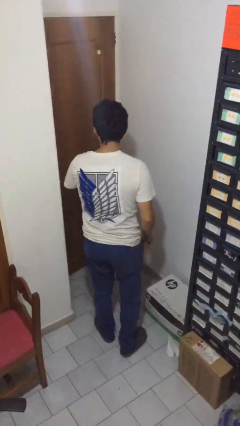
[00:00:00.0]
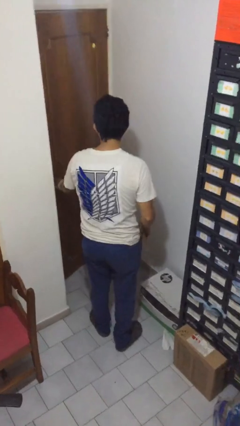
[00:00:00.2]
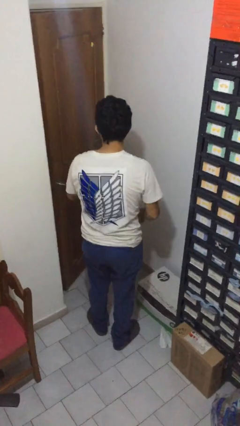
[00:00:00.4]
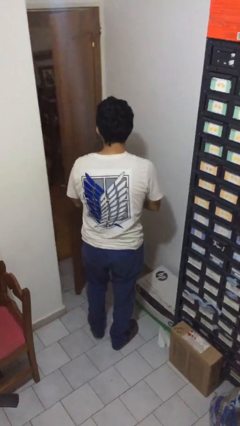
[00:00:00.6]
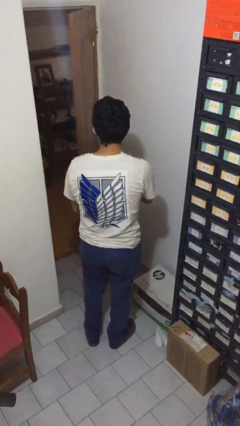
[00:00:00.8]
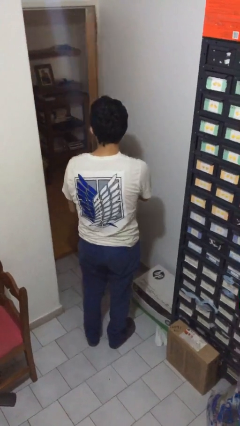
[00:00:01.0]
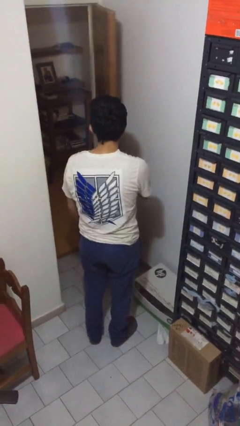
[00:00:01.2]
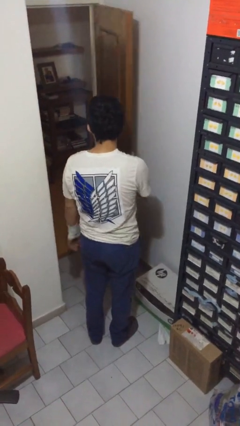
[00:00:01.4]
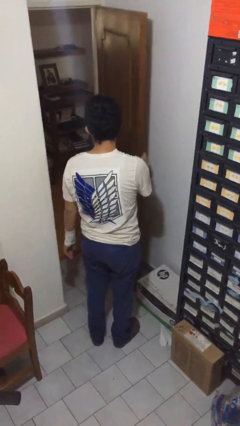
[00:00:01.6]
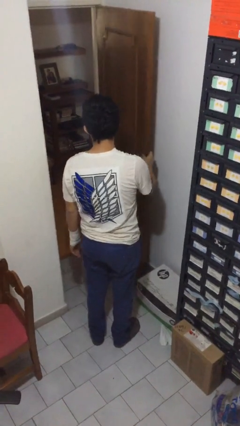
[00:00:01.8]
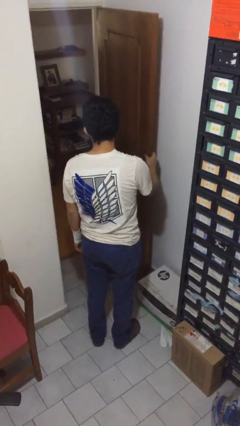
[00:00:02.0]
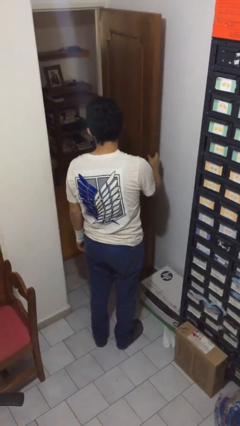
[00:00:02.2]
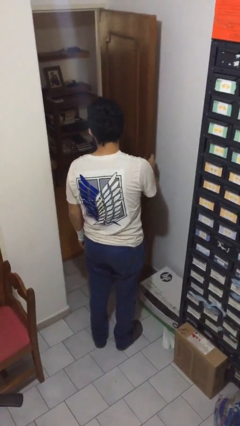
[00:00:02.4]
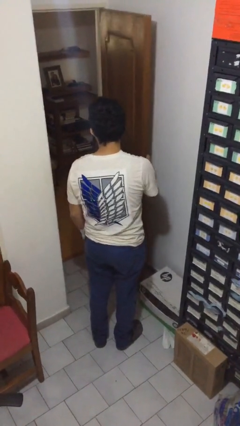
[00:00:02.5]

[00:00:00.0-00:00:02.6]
person opens facility door

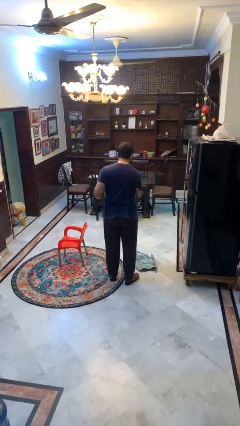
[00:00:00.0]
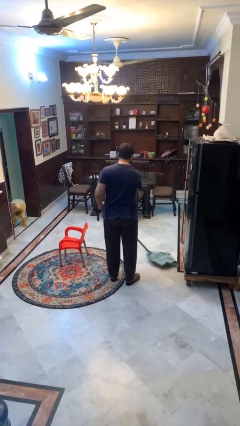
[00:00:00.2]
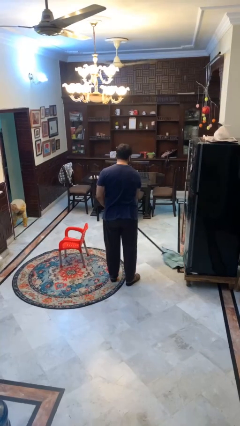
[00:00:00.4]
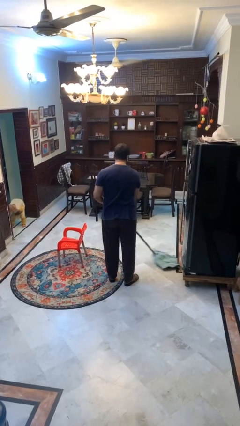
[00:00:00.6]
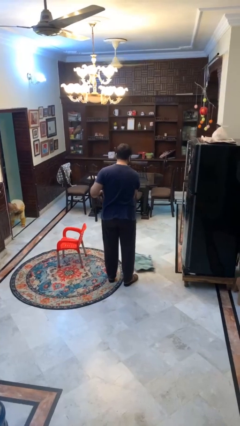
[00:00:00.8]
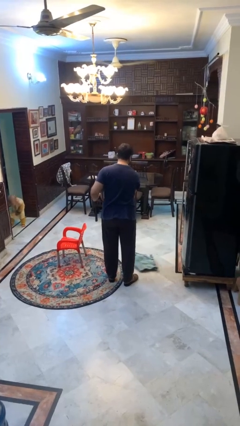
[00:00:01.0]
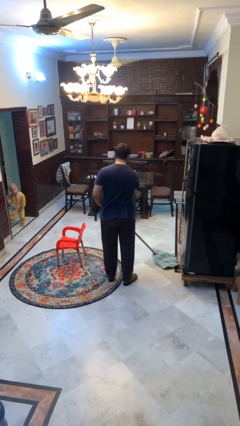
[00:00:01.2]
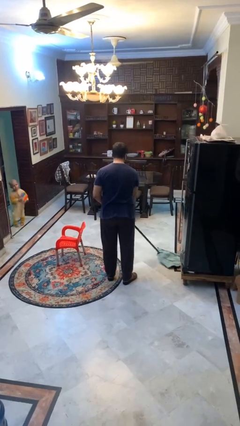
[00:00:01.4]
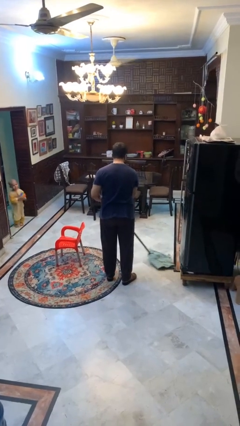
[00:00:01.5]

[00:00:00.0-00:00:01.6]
person mops

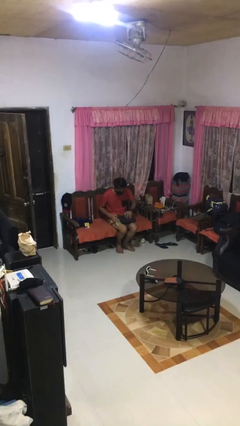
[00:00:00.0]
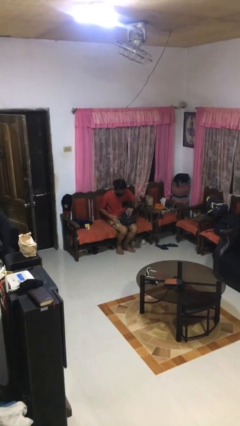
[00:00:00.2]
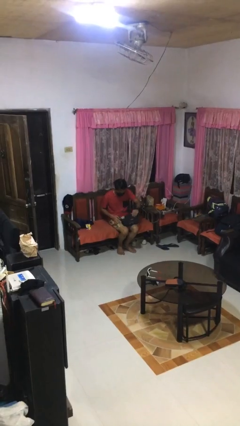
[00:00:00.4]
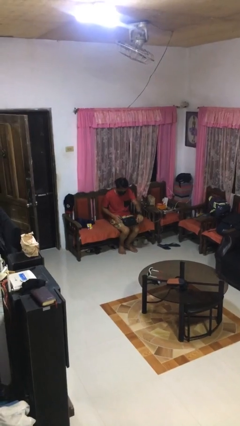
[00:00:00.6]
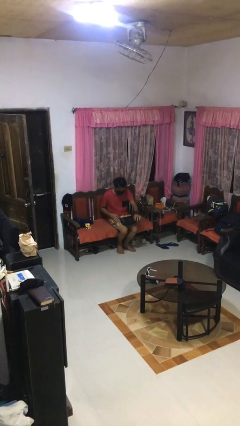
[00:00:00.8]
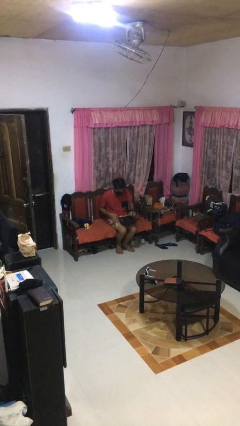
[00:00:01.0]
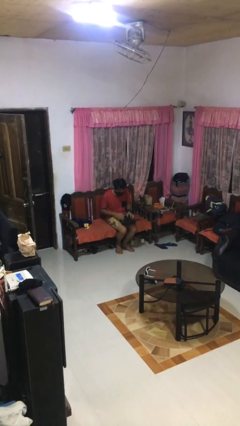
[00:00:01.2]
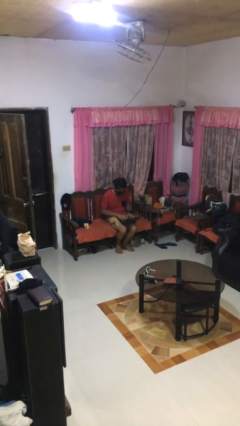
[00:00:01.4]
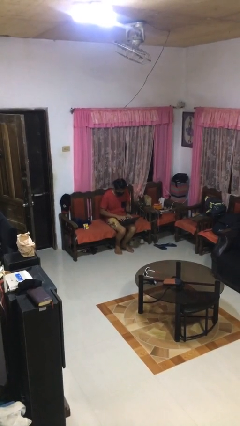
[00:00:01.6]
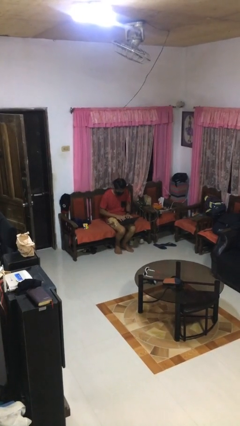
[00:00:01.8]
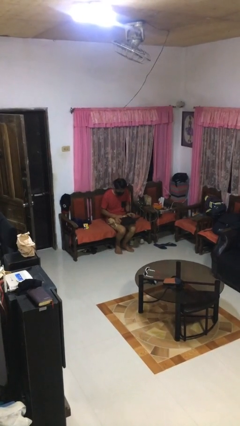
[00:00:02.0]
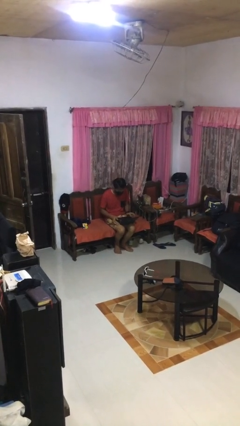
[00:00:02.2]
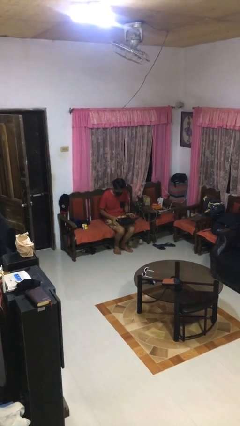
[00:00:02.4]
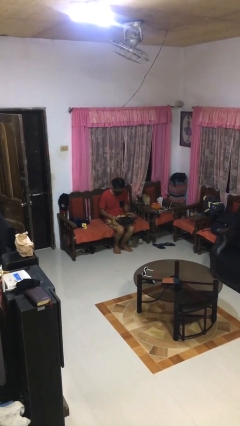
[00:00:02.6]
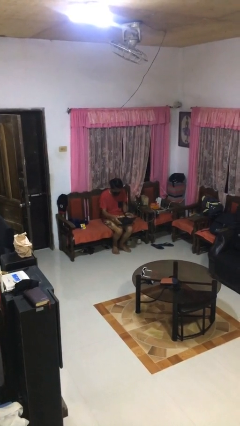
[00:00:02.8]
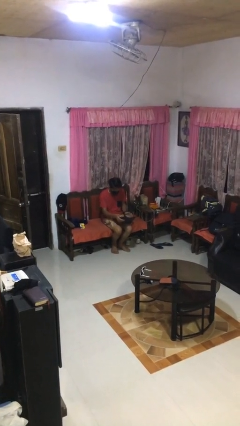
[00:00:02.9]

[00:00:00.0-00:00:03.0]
person opens laptop

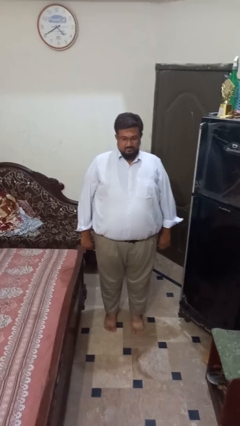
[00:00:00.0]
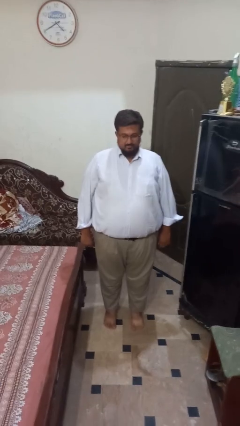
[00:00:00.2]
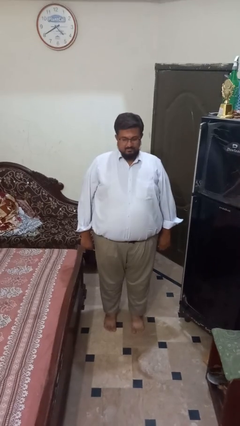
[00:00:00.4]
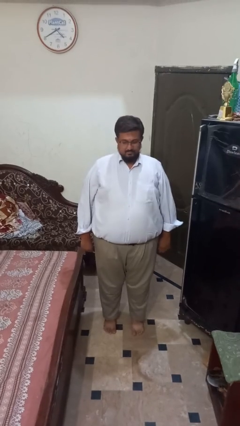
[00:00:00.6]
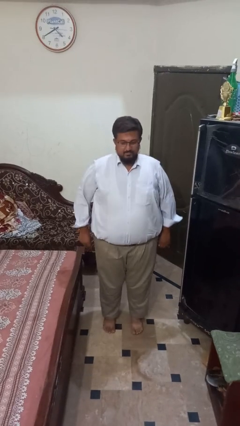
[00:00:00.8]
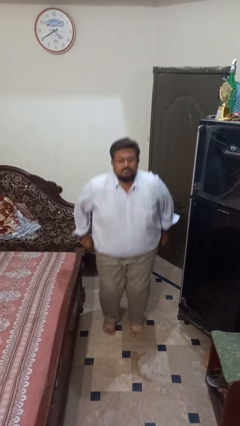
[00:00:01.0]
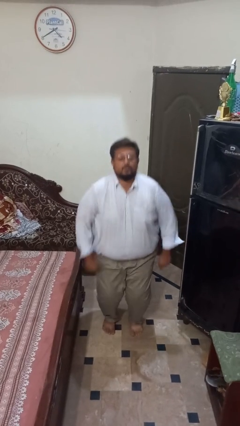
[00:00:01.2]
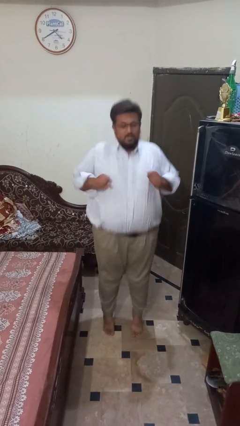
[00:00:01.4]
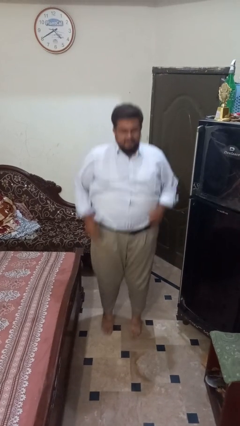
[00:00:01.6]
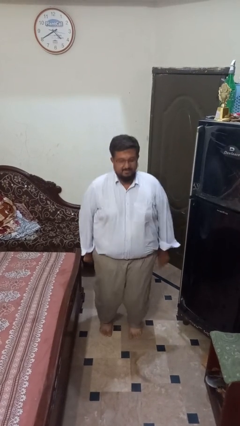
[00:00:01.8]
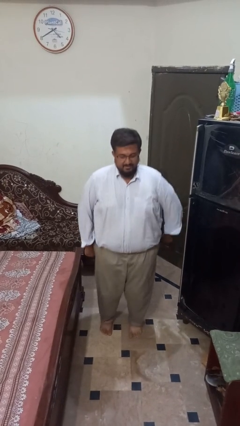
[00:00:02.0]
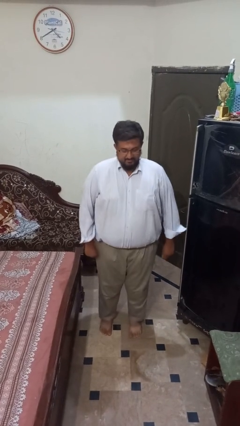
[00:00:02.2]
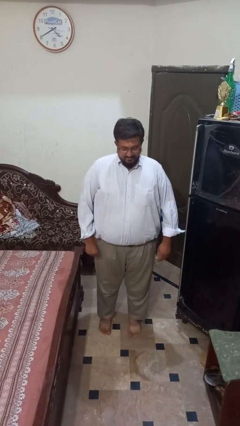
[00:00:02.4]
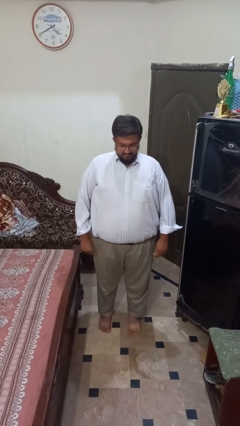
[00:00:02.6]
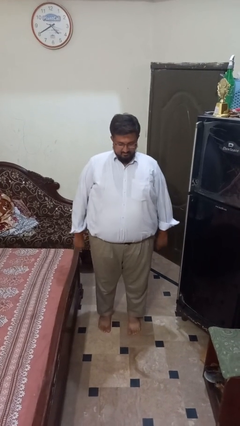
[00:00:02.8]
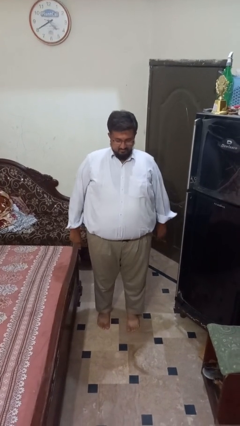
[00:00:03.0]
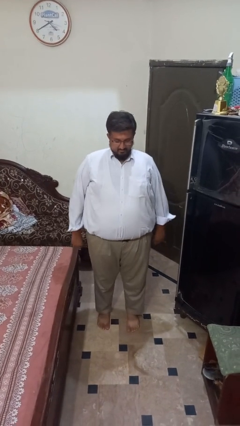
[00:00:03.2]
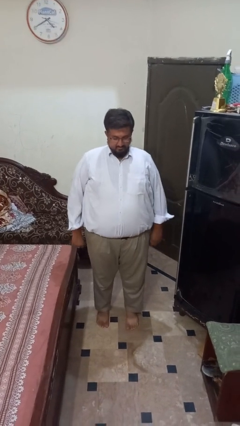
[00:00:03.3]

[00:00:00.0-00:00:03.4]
person jumps

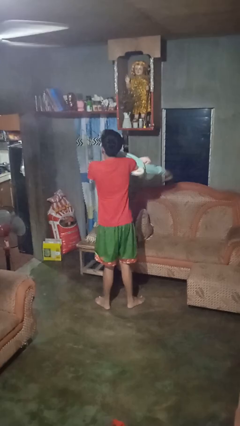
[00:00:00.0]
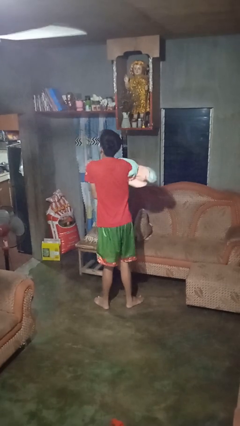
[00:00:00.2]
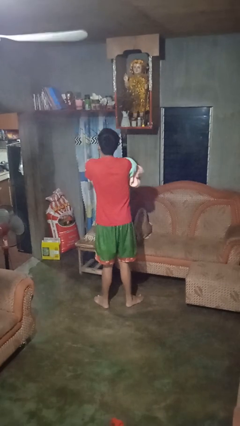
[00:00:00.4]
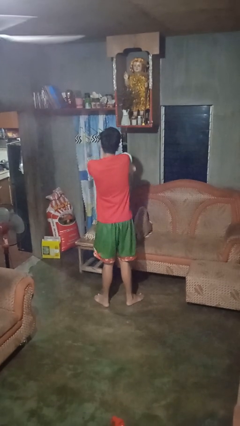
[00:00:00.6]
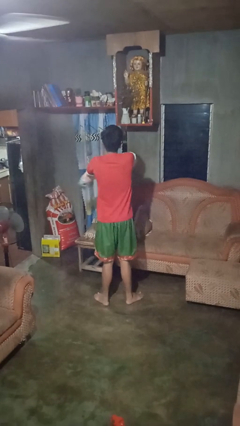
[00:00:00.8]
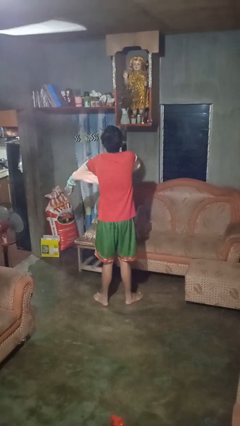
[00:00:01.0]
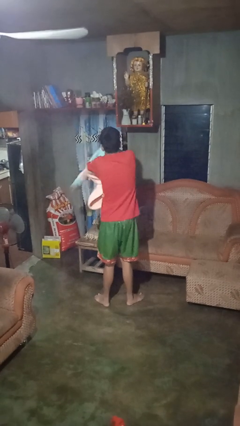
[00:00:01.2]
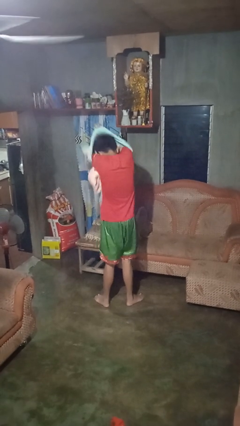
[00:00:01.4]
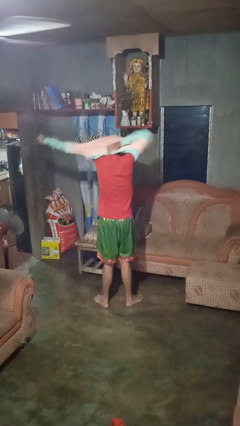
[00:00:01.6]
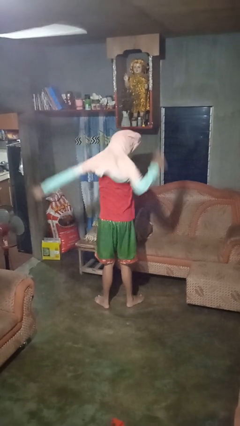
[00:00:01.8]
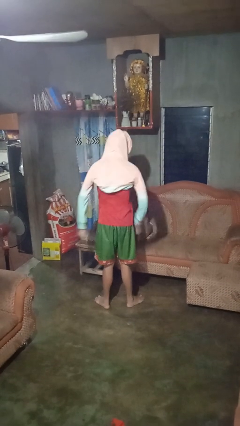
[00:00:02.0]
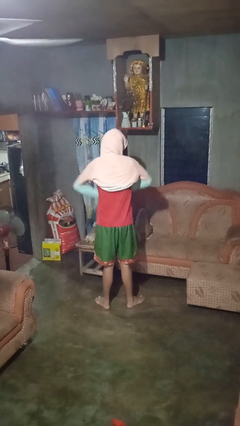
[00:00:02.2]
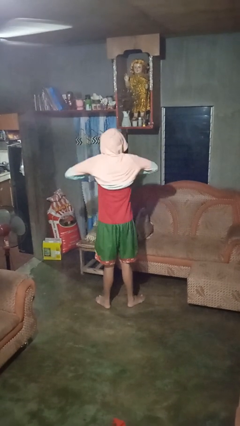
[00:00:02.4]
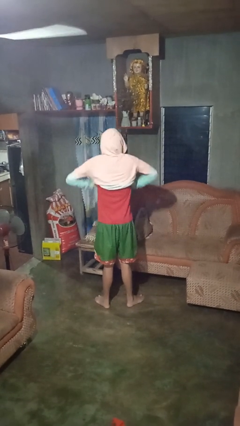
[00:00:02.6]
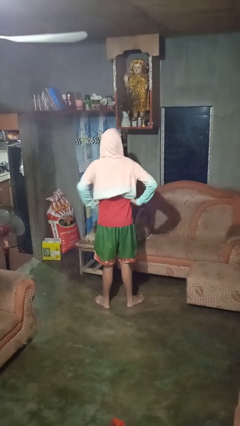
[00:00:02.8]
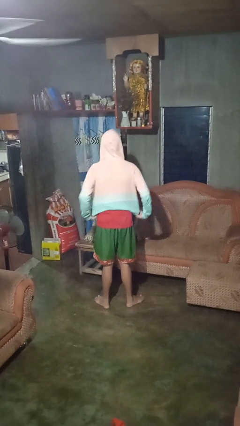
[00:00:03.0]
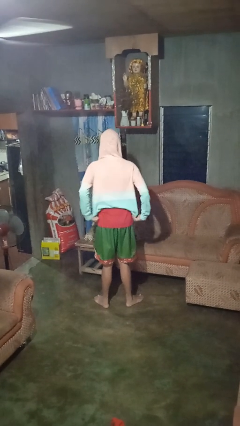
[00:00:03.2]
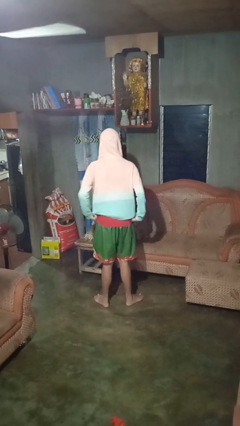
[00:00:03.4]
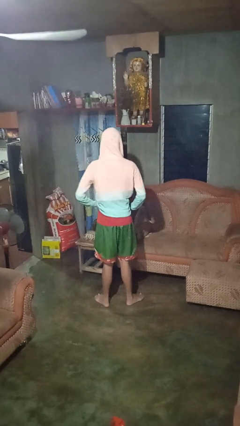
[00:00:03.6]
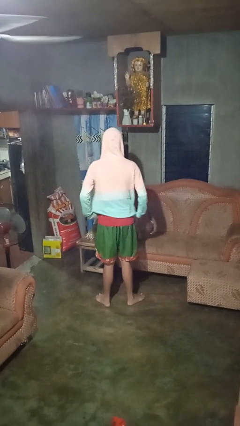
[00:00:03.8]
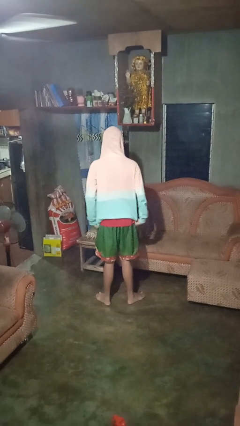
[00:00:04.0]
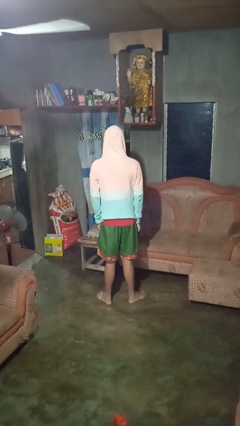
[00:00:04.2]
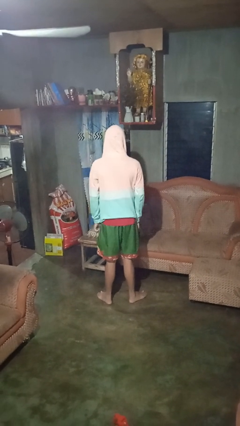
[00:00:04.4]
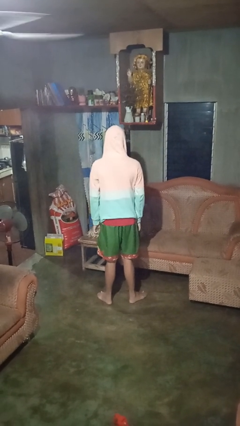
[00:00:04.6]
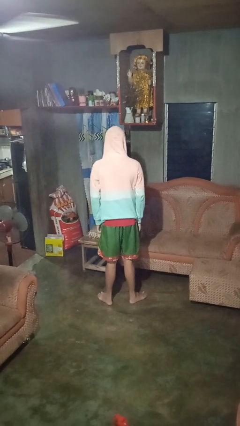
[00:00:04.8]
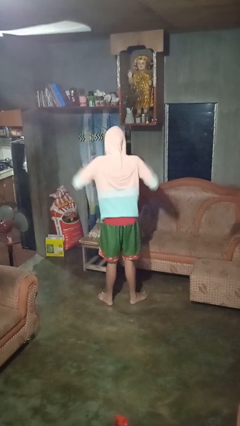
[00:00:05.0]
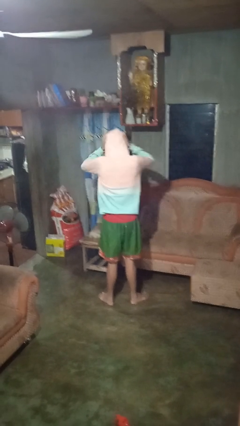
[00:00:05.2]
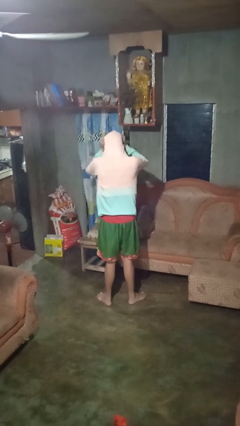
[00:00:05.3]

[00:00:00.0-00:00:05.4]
person puts on hoodie

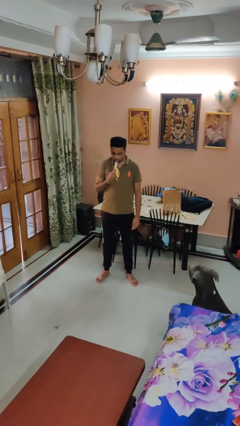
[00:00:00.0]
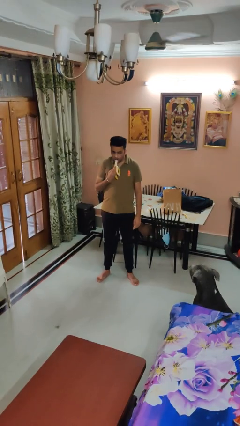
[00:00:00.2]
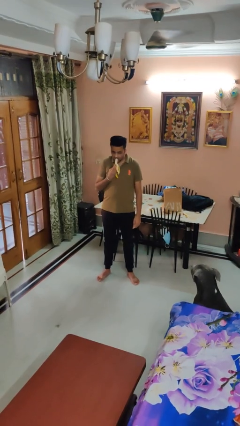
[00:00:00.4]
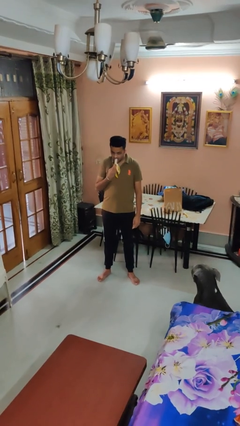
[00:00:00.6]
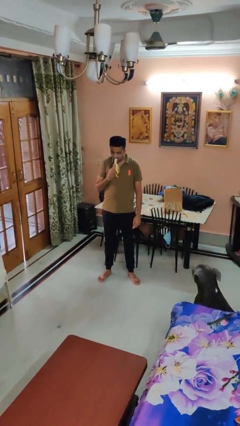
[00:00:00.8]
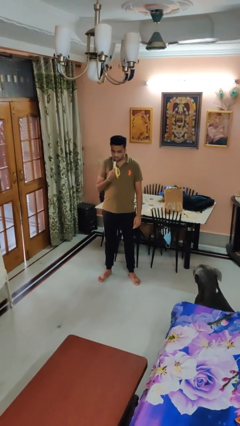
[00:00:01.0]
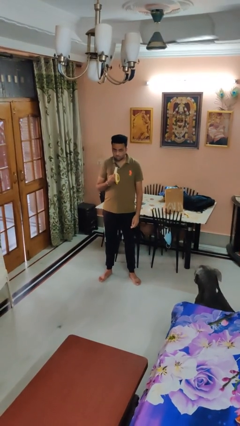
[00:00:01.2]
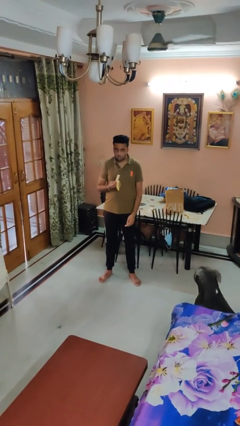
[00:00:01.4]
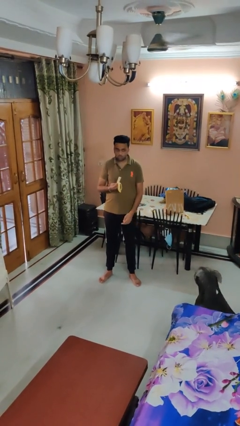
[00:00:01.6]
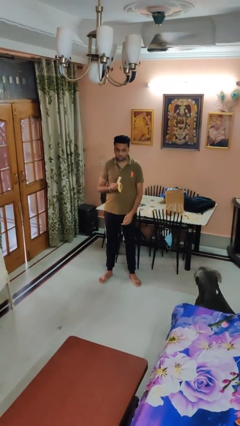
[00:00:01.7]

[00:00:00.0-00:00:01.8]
person eats banana
